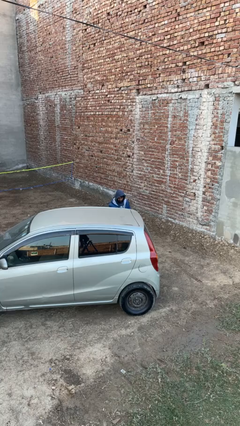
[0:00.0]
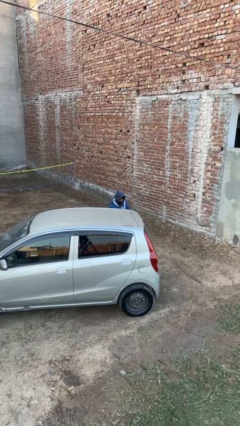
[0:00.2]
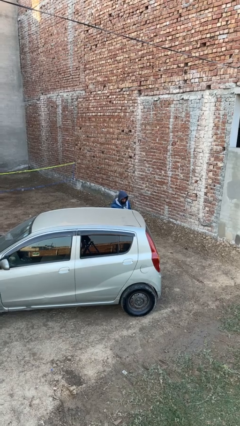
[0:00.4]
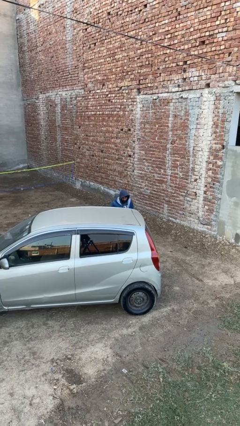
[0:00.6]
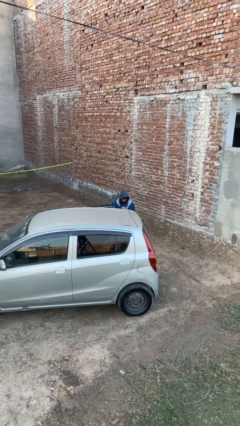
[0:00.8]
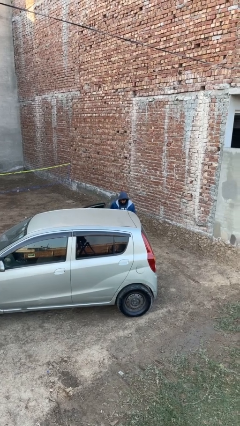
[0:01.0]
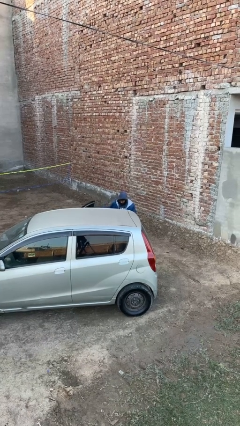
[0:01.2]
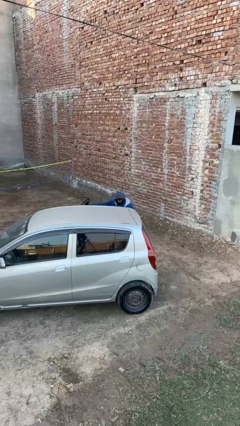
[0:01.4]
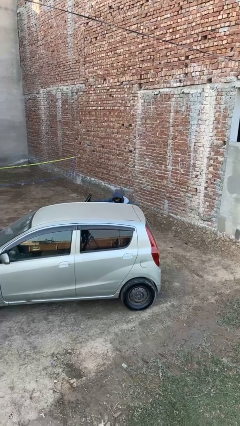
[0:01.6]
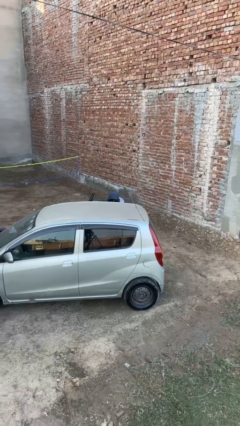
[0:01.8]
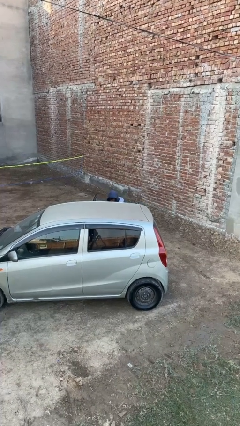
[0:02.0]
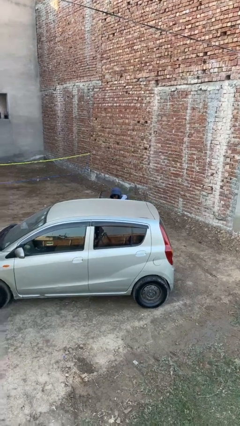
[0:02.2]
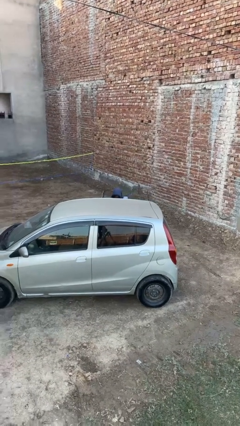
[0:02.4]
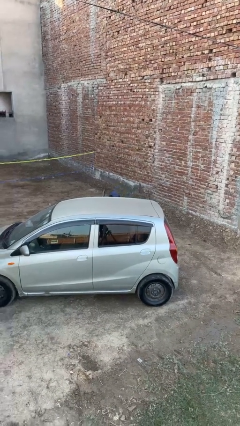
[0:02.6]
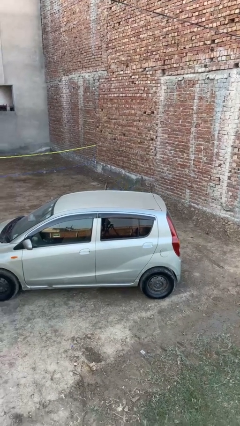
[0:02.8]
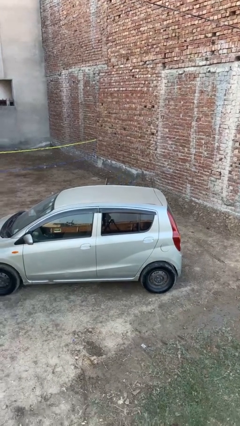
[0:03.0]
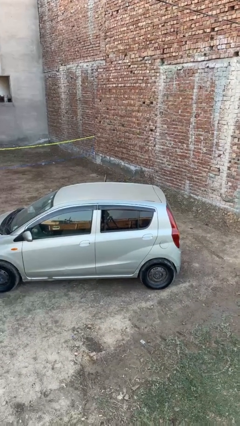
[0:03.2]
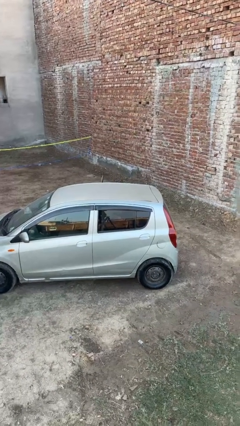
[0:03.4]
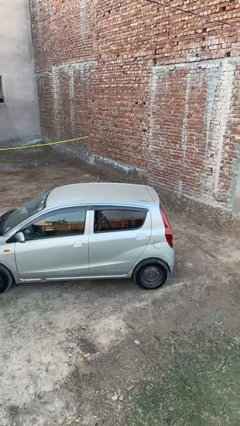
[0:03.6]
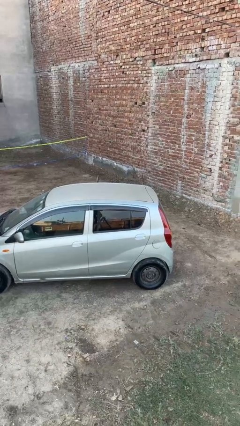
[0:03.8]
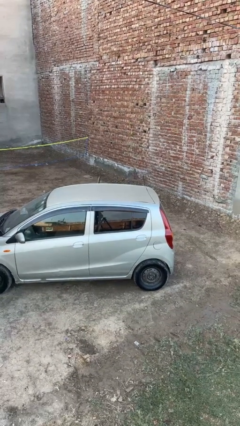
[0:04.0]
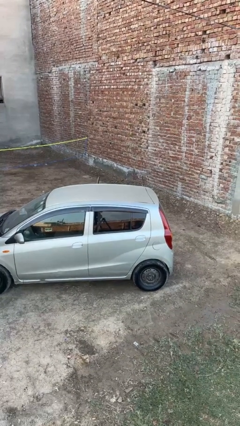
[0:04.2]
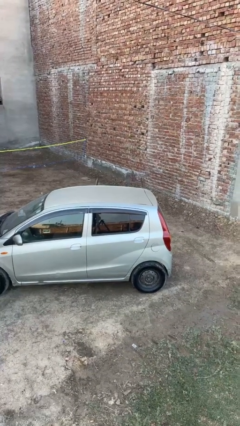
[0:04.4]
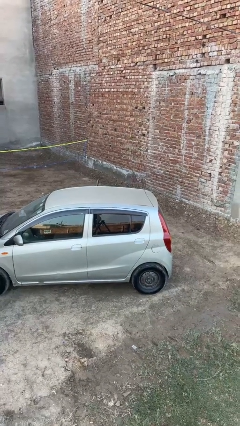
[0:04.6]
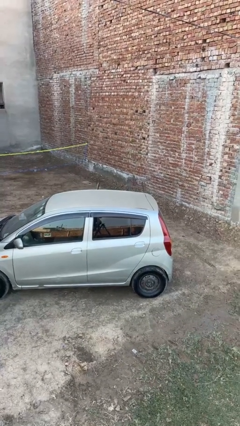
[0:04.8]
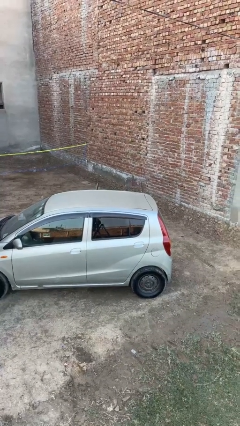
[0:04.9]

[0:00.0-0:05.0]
person enters car

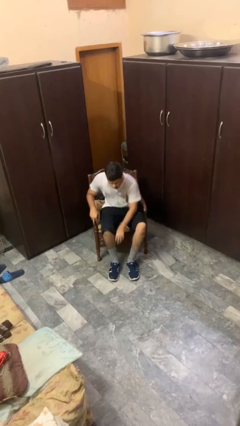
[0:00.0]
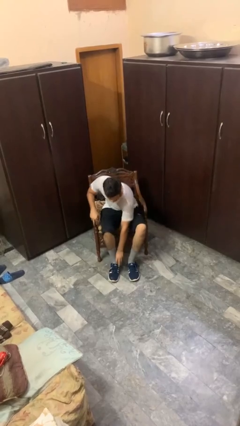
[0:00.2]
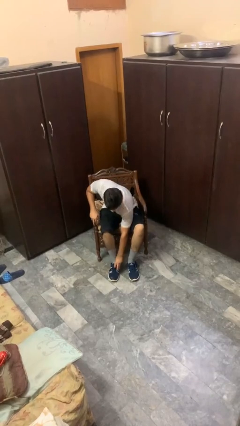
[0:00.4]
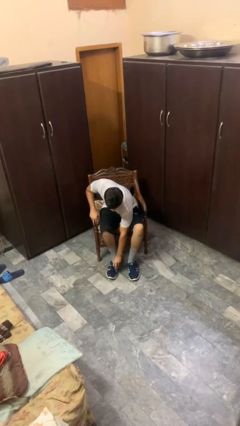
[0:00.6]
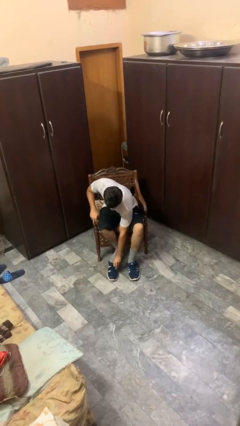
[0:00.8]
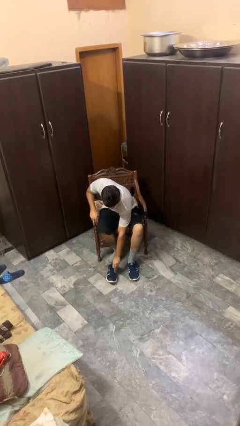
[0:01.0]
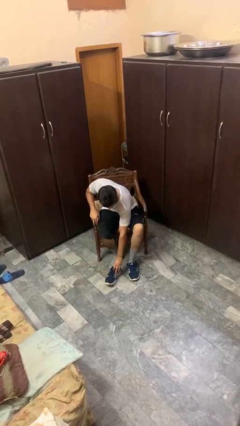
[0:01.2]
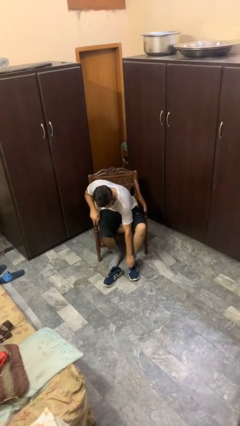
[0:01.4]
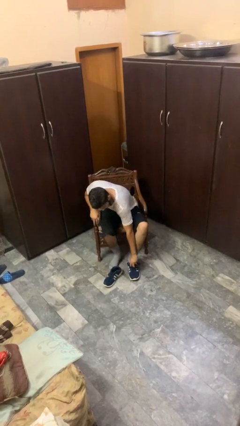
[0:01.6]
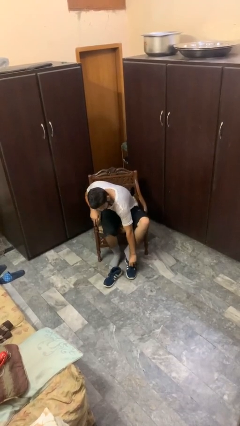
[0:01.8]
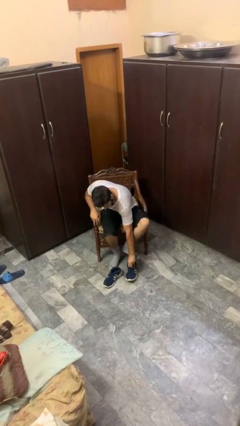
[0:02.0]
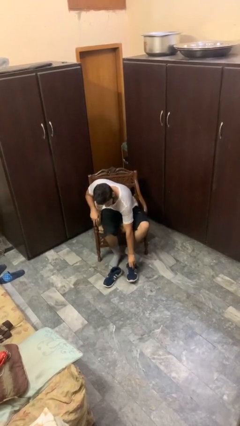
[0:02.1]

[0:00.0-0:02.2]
person takes off shoes

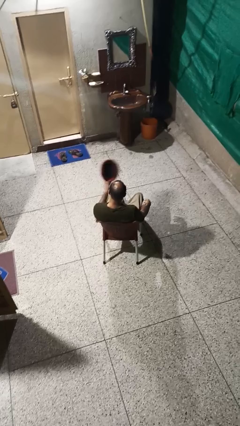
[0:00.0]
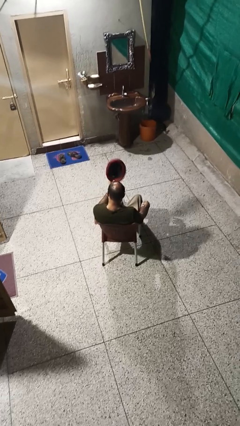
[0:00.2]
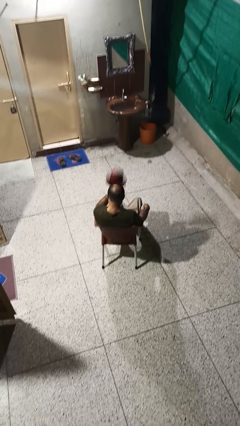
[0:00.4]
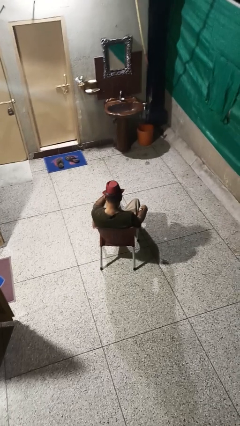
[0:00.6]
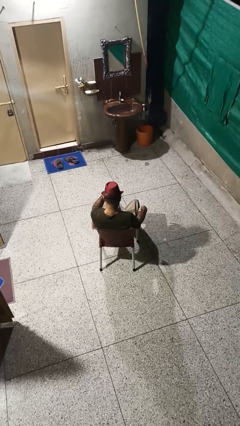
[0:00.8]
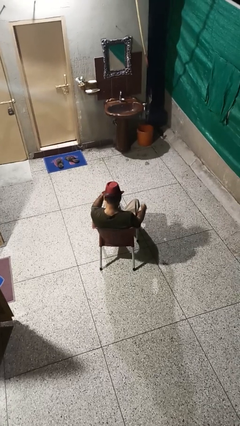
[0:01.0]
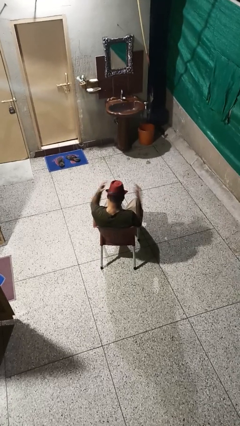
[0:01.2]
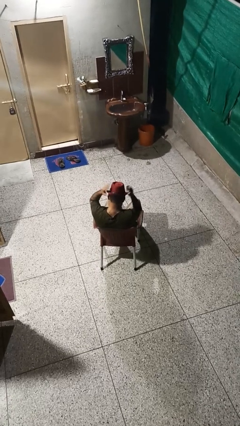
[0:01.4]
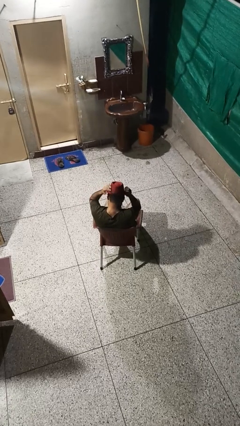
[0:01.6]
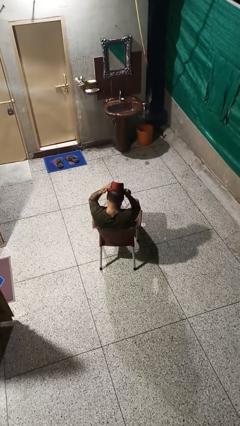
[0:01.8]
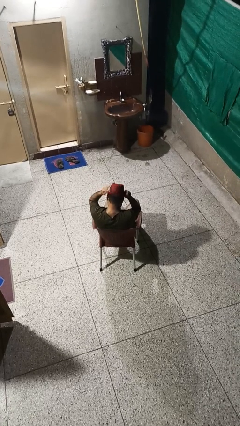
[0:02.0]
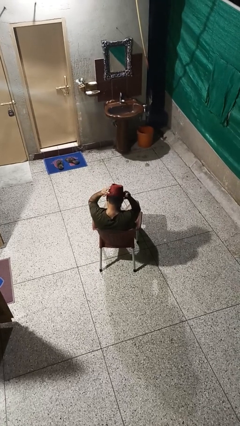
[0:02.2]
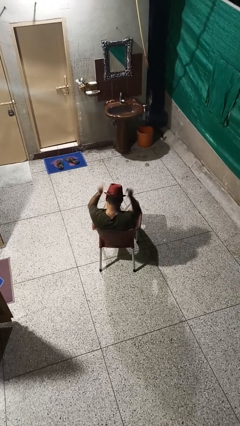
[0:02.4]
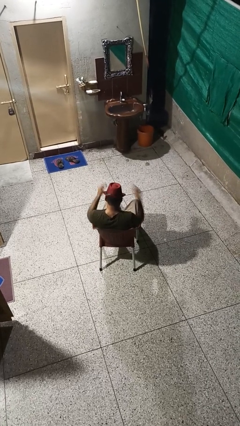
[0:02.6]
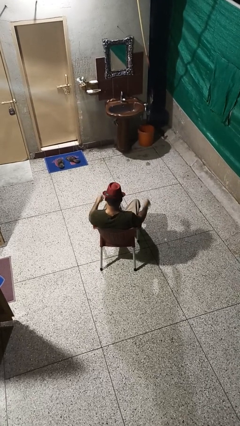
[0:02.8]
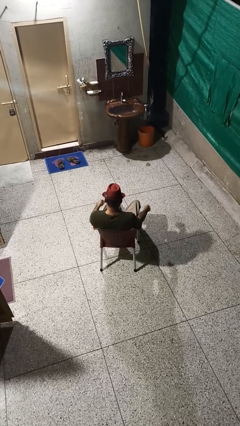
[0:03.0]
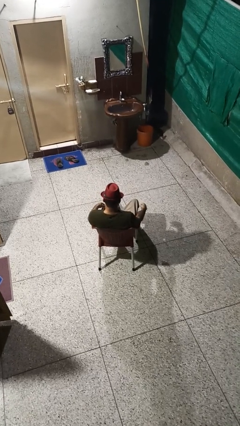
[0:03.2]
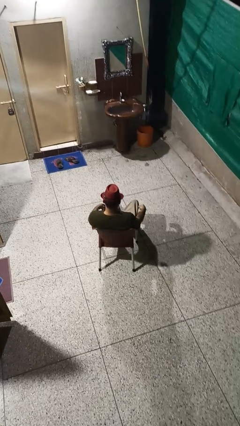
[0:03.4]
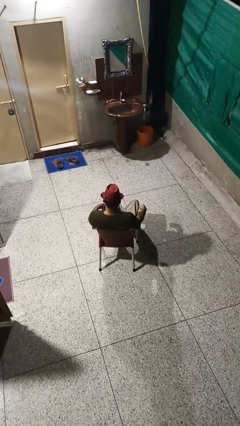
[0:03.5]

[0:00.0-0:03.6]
person puts on hat

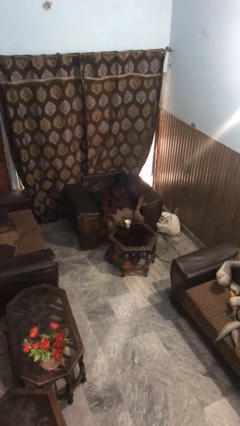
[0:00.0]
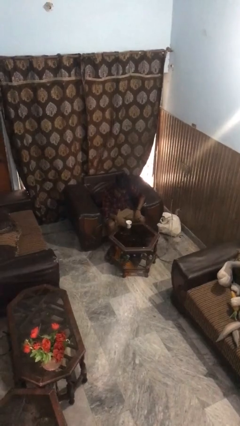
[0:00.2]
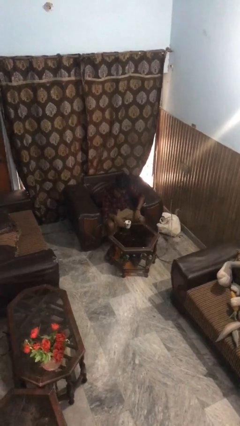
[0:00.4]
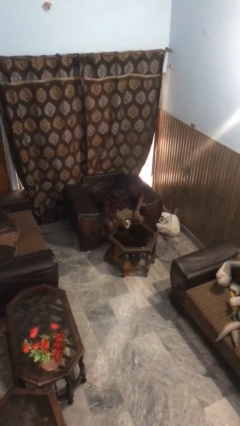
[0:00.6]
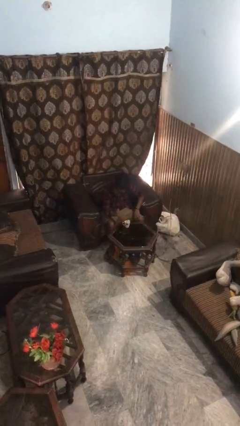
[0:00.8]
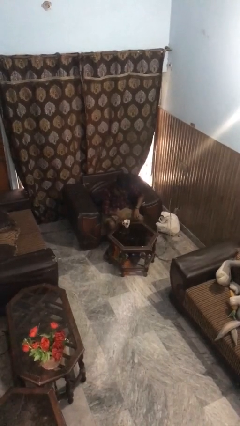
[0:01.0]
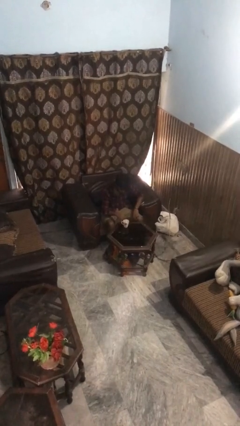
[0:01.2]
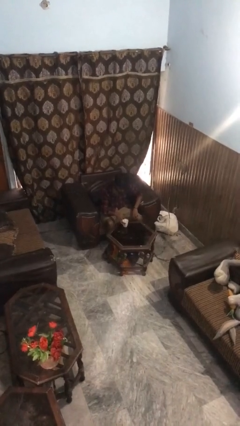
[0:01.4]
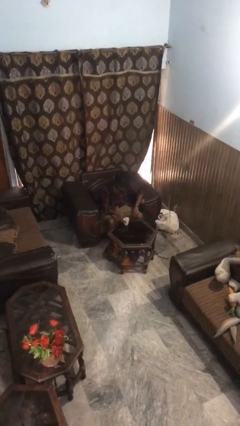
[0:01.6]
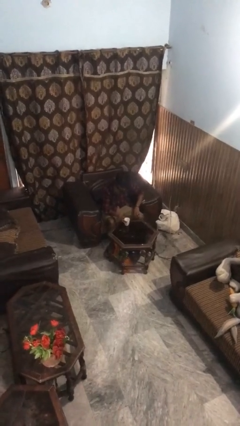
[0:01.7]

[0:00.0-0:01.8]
person stirs mug

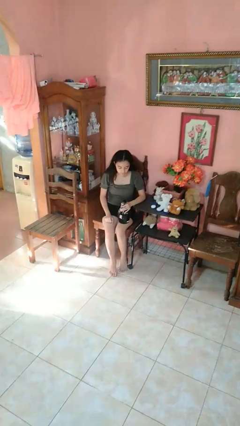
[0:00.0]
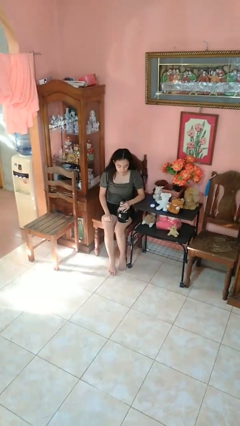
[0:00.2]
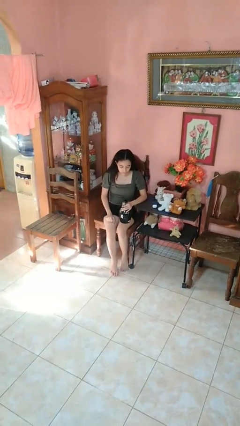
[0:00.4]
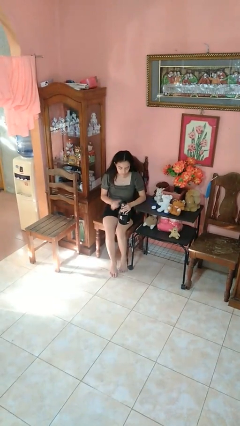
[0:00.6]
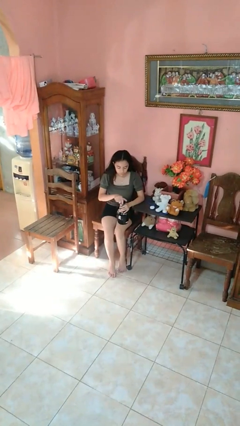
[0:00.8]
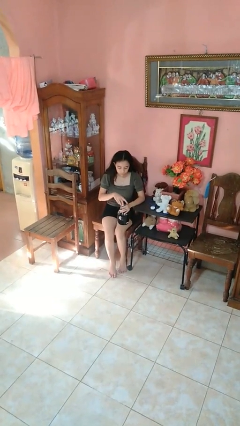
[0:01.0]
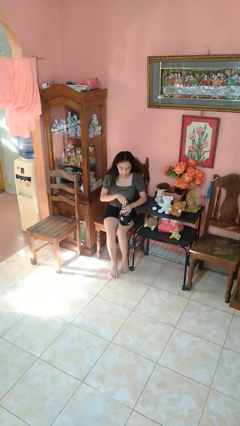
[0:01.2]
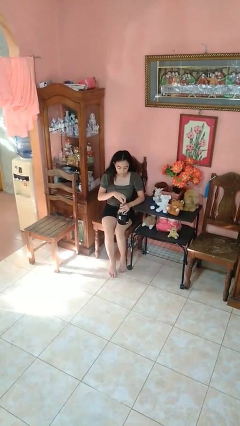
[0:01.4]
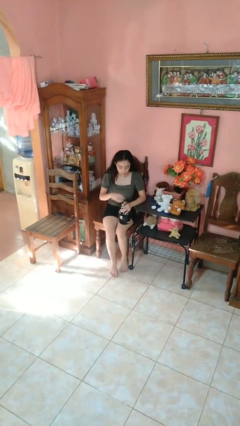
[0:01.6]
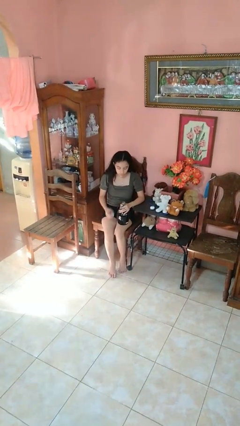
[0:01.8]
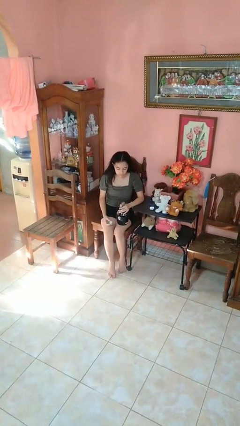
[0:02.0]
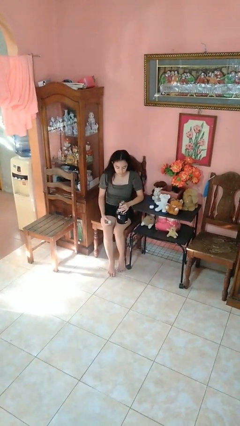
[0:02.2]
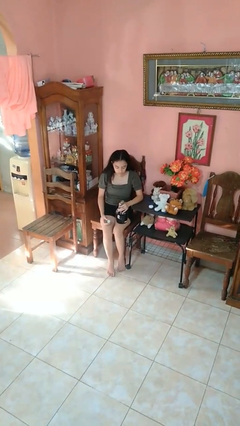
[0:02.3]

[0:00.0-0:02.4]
person unscrews lid from bottle

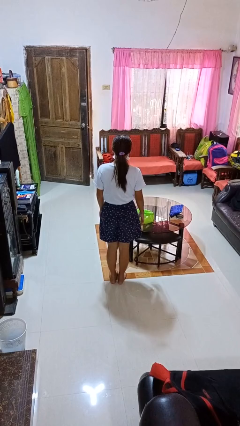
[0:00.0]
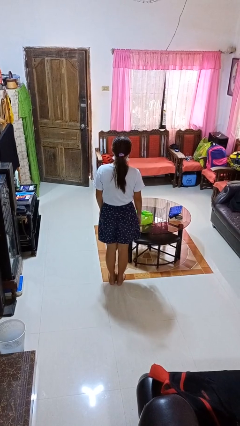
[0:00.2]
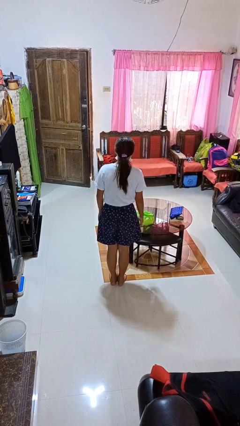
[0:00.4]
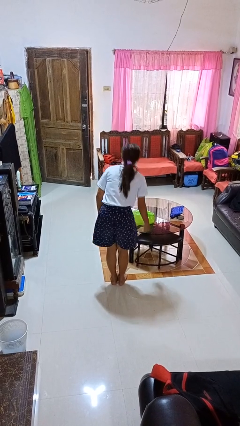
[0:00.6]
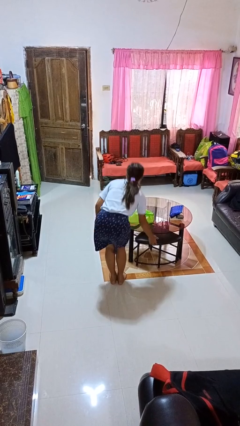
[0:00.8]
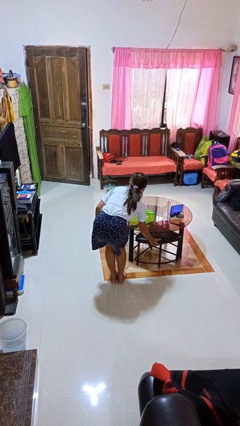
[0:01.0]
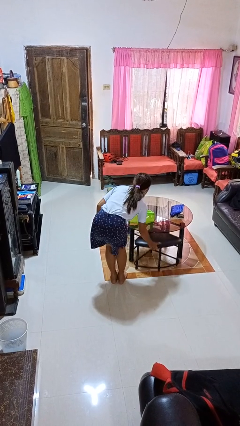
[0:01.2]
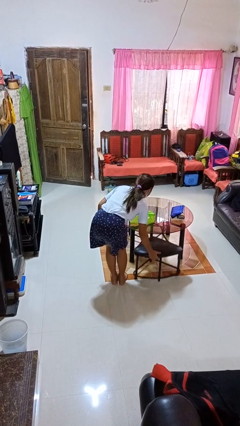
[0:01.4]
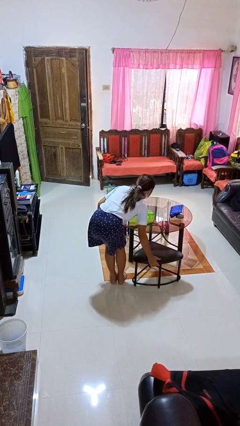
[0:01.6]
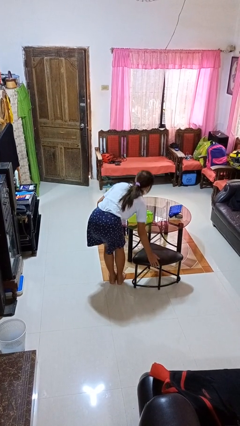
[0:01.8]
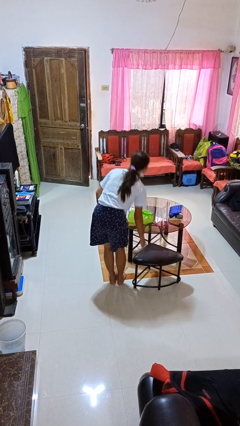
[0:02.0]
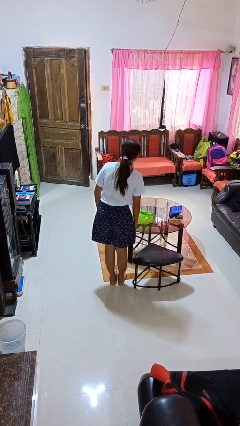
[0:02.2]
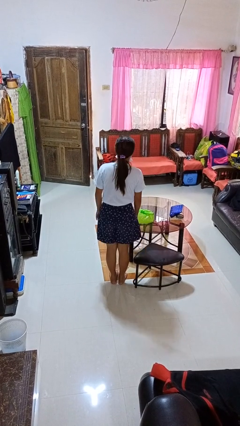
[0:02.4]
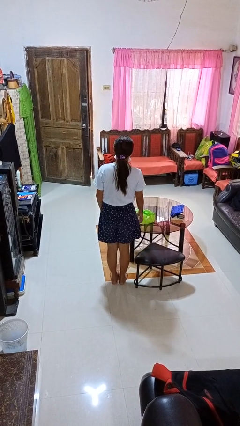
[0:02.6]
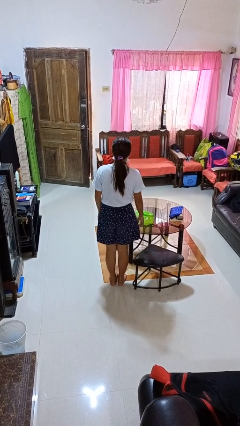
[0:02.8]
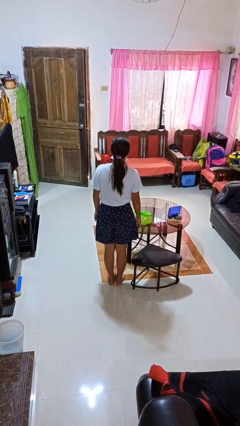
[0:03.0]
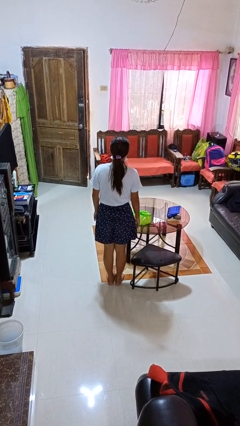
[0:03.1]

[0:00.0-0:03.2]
person pulls out chair
